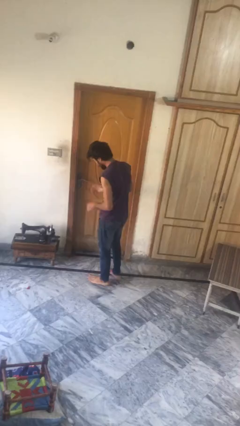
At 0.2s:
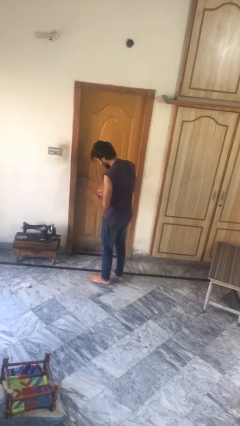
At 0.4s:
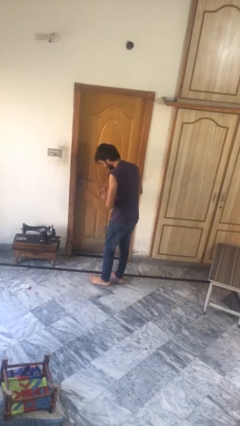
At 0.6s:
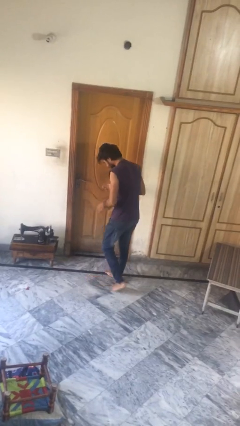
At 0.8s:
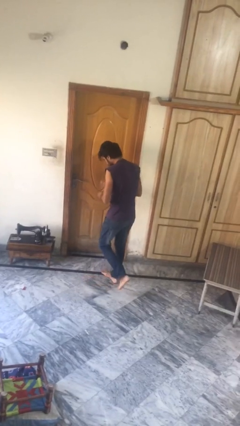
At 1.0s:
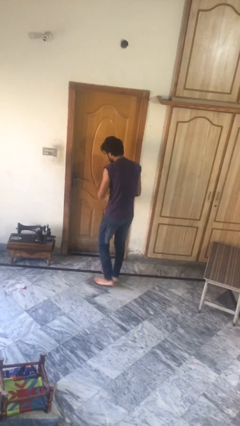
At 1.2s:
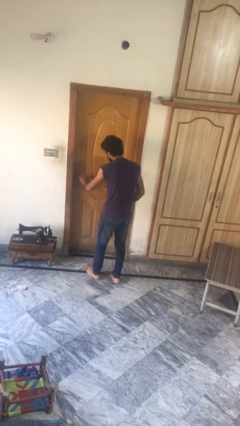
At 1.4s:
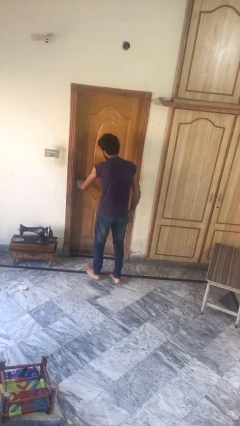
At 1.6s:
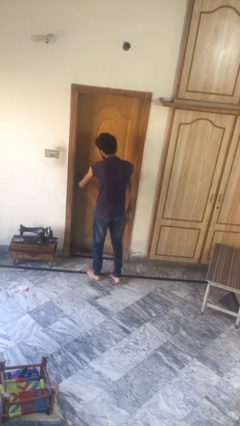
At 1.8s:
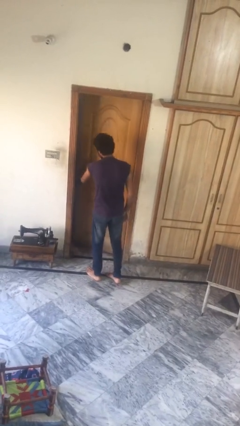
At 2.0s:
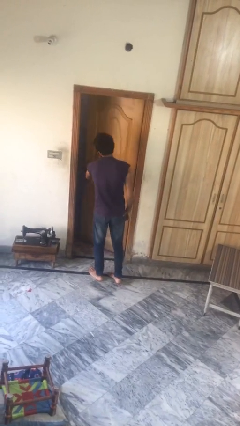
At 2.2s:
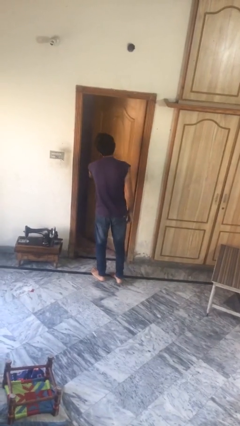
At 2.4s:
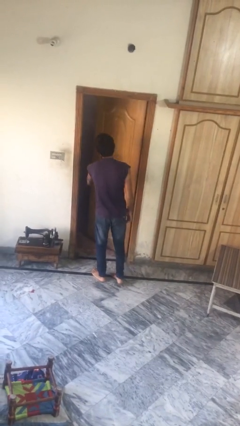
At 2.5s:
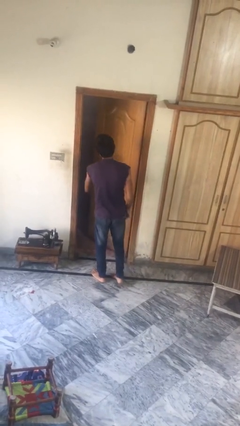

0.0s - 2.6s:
person opens facility door

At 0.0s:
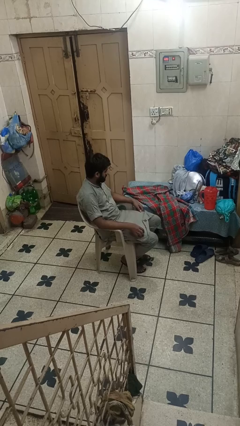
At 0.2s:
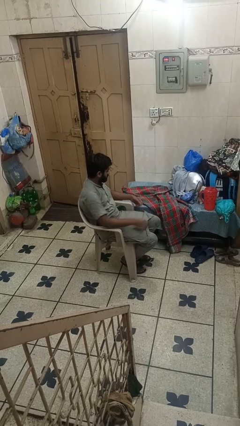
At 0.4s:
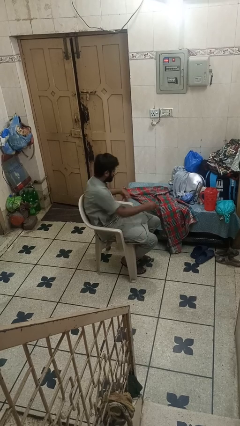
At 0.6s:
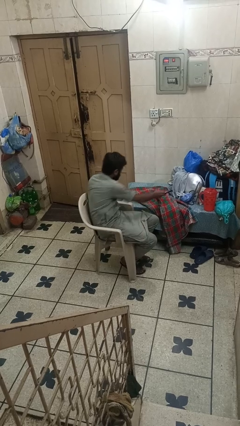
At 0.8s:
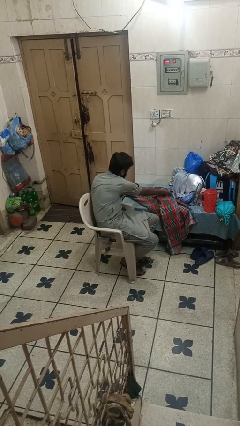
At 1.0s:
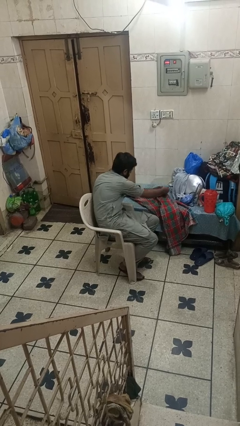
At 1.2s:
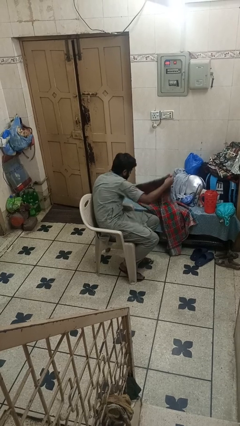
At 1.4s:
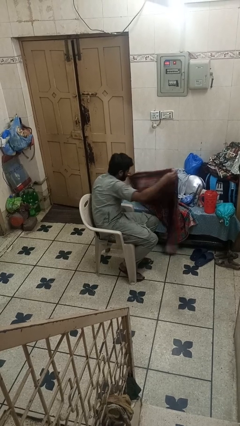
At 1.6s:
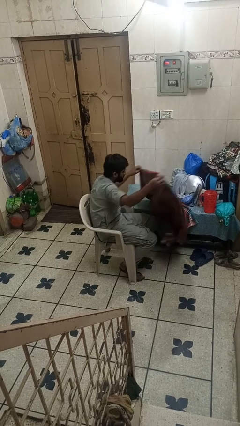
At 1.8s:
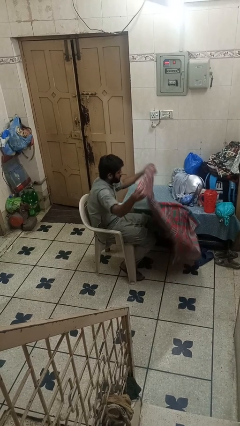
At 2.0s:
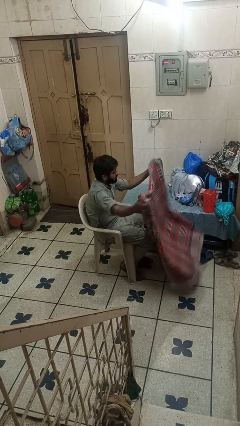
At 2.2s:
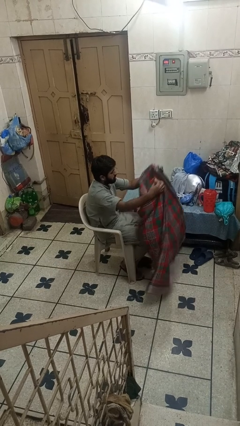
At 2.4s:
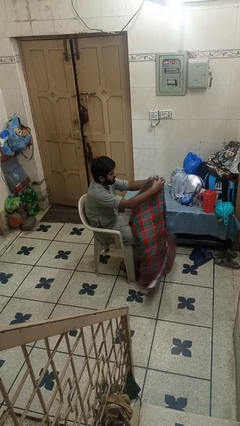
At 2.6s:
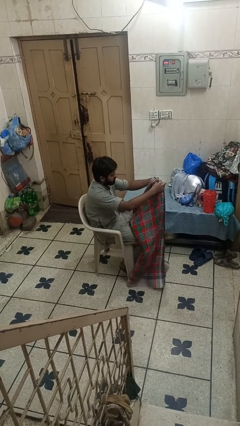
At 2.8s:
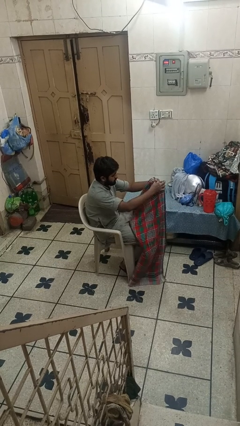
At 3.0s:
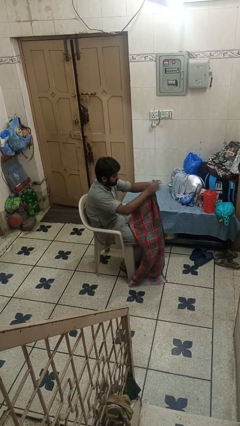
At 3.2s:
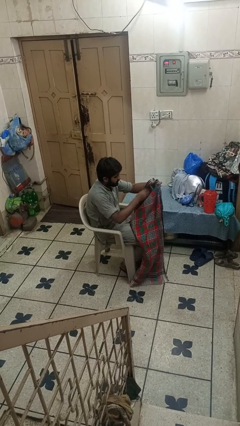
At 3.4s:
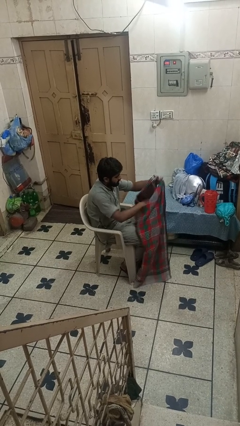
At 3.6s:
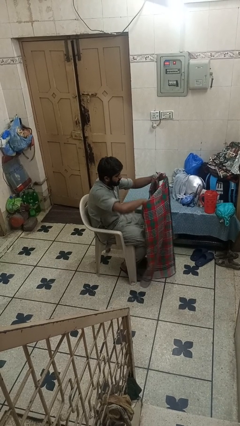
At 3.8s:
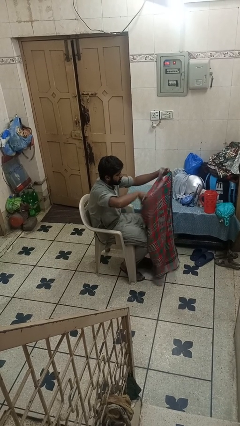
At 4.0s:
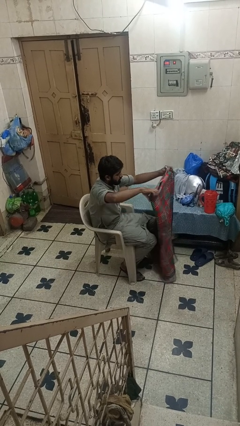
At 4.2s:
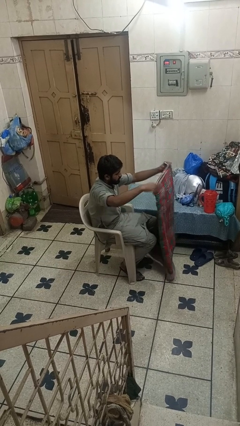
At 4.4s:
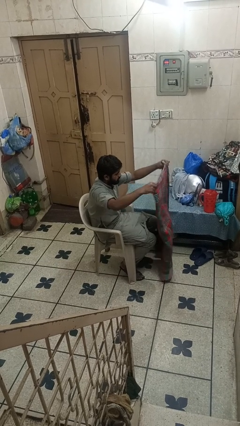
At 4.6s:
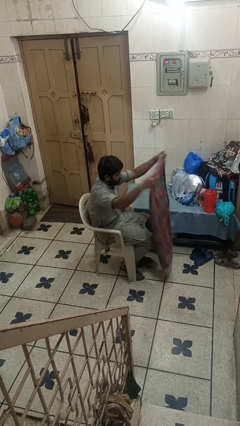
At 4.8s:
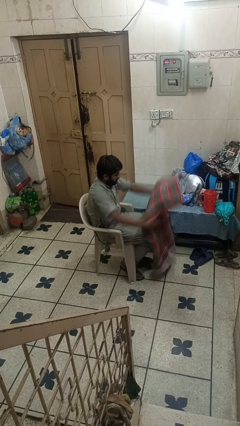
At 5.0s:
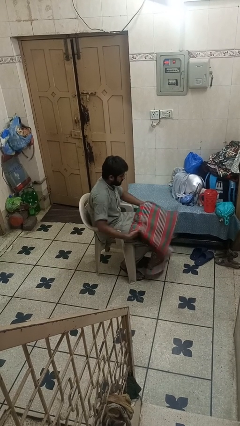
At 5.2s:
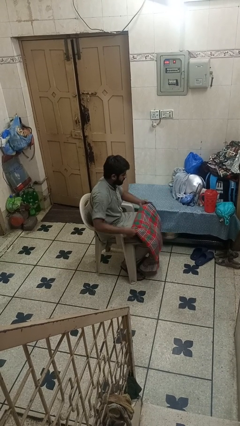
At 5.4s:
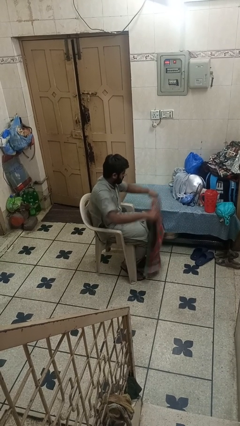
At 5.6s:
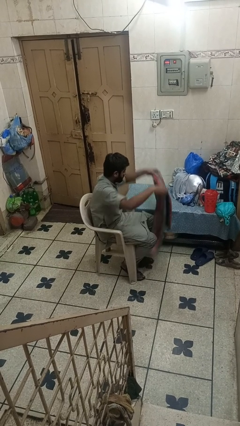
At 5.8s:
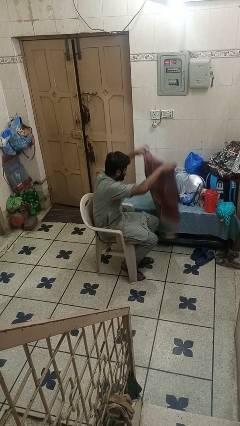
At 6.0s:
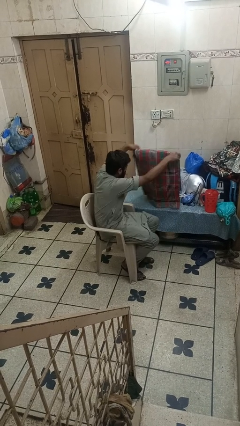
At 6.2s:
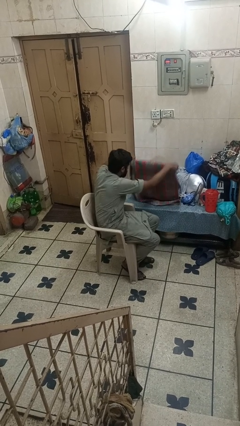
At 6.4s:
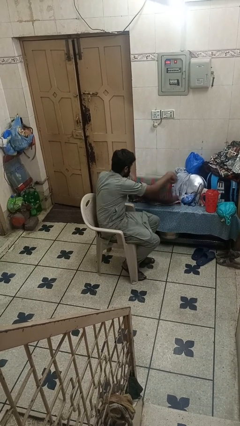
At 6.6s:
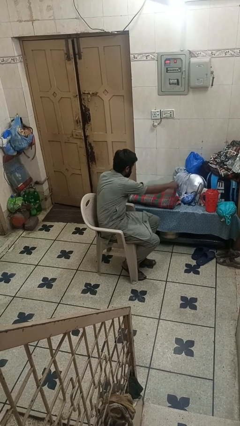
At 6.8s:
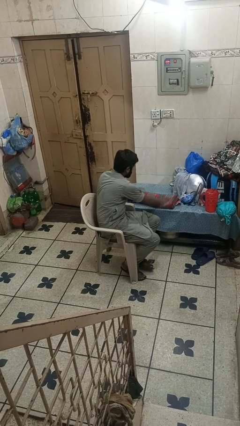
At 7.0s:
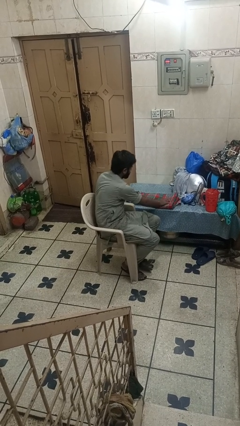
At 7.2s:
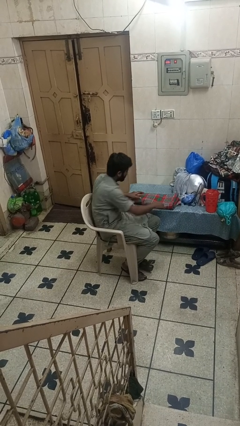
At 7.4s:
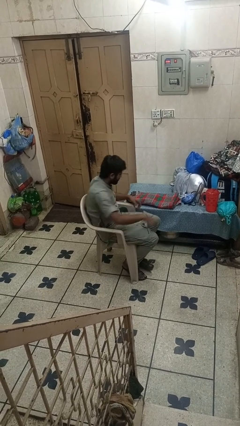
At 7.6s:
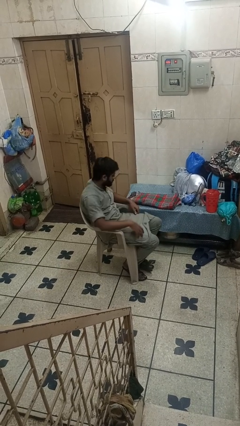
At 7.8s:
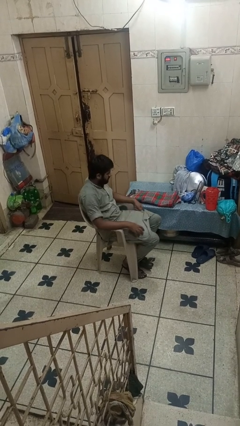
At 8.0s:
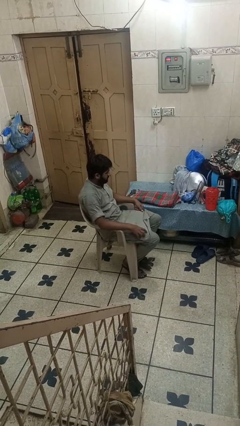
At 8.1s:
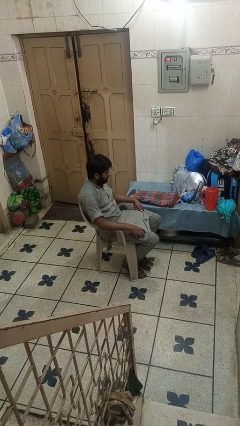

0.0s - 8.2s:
person folds blanket

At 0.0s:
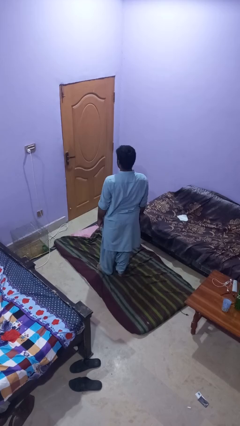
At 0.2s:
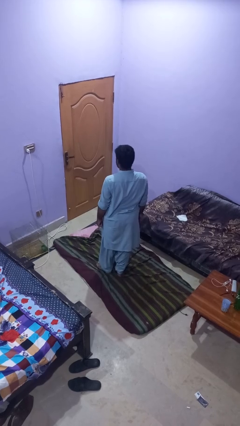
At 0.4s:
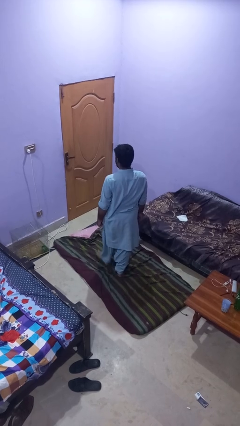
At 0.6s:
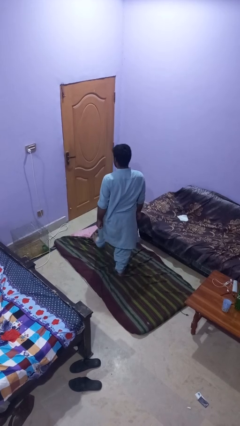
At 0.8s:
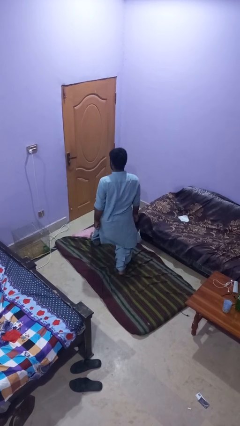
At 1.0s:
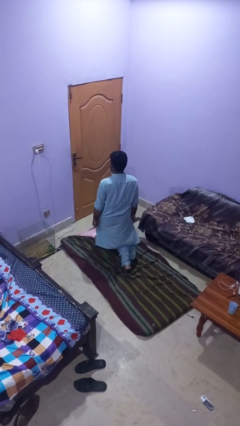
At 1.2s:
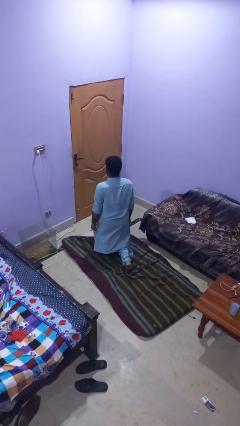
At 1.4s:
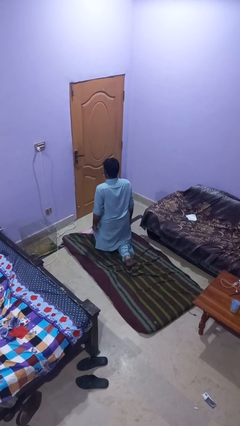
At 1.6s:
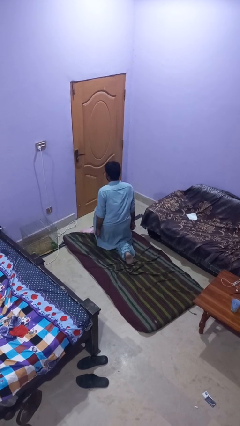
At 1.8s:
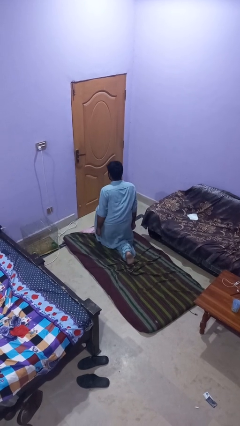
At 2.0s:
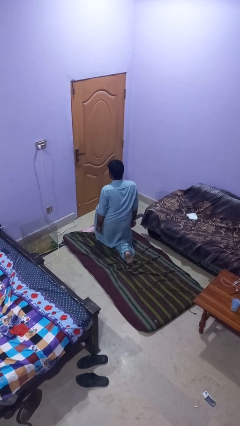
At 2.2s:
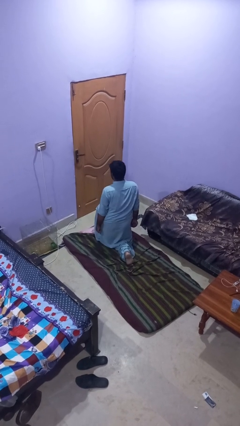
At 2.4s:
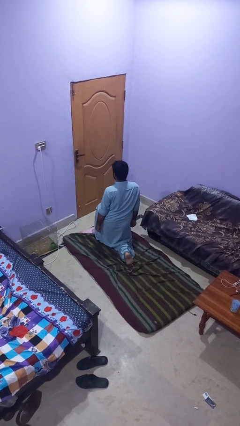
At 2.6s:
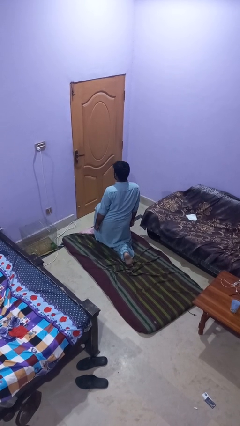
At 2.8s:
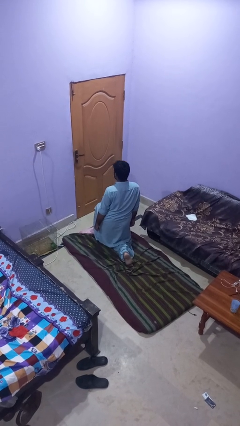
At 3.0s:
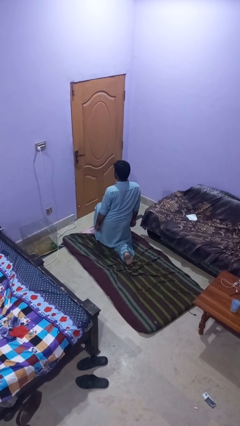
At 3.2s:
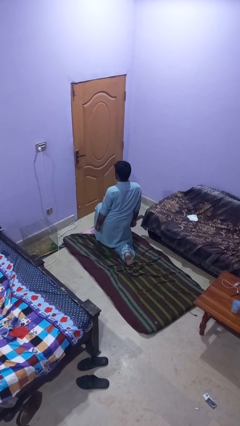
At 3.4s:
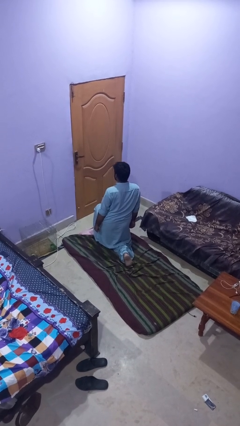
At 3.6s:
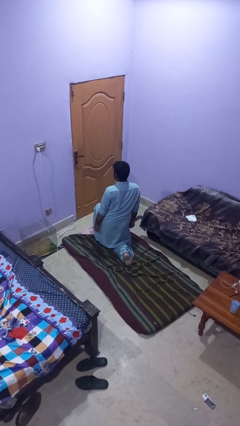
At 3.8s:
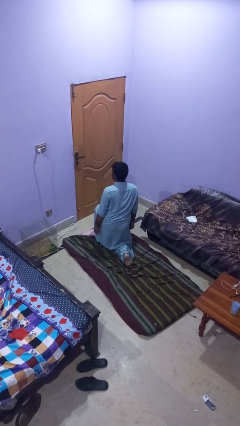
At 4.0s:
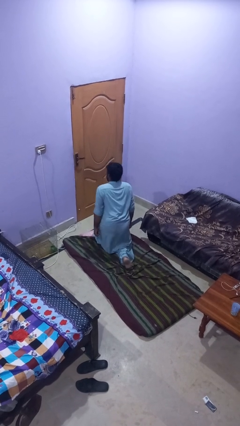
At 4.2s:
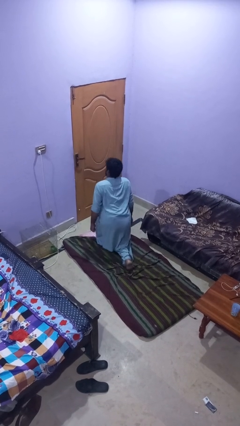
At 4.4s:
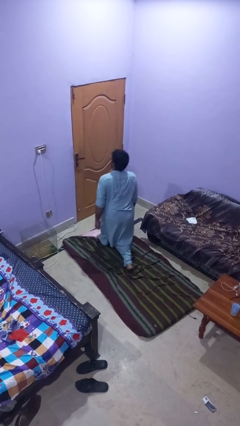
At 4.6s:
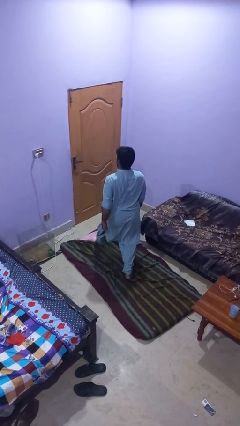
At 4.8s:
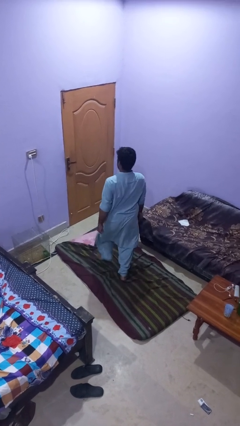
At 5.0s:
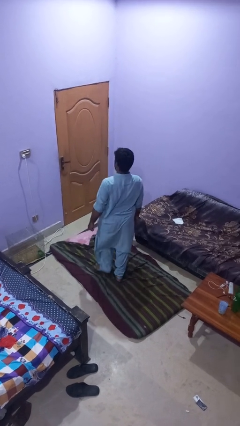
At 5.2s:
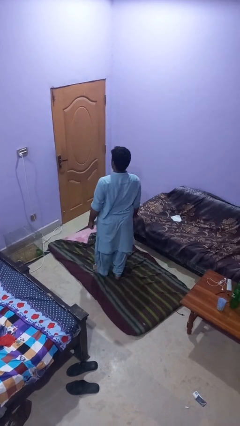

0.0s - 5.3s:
person exercises with lunges

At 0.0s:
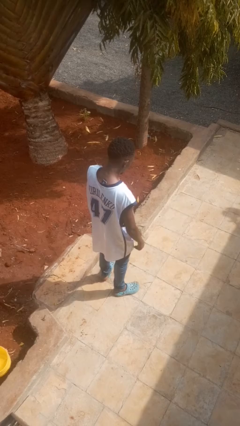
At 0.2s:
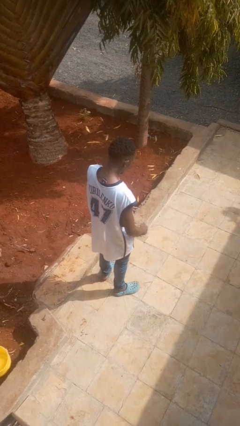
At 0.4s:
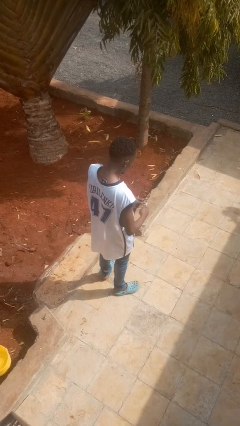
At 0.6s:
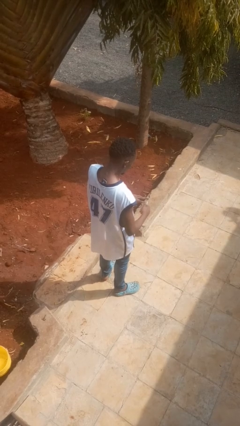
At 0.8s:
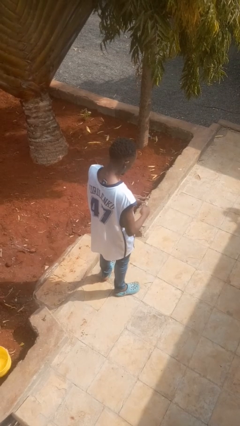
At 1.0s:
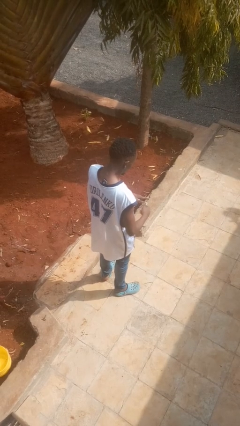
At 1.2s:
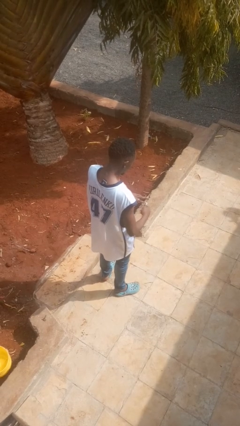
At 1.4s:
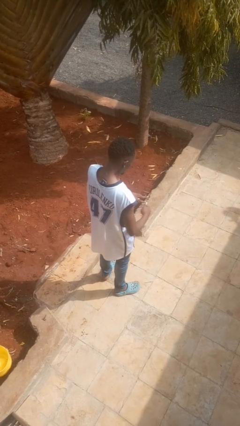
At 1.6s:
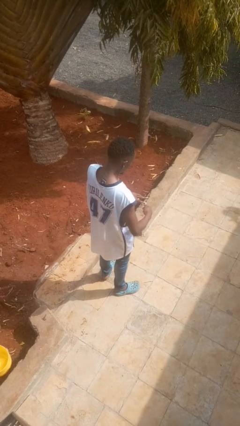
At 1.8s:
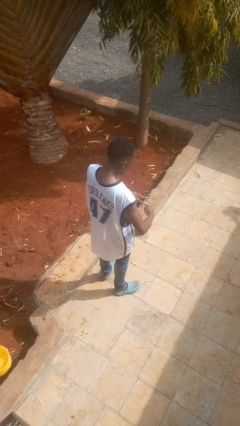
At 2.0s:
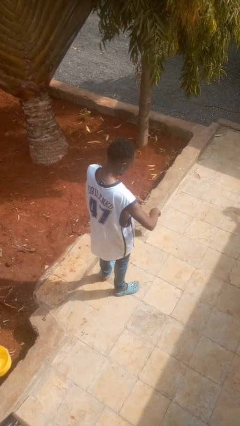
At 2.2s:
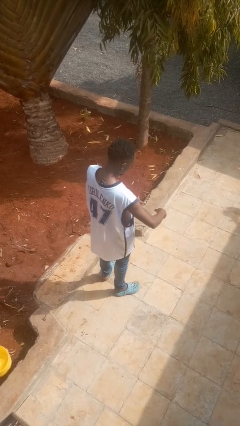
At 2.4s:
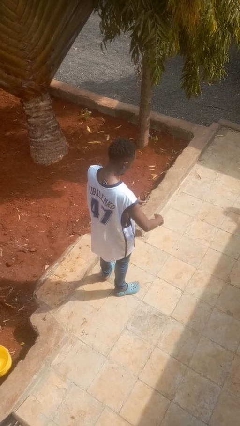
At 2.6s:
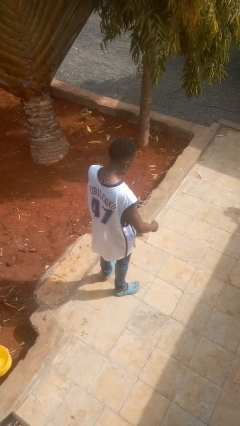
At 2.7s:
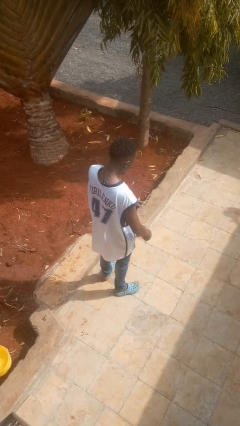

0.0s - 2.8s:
person clips fingernails
